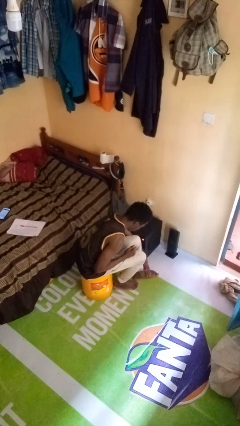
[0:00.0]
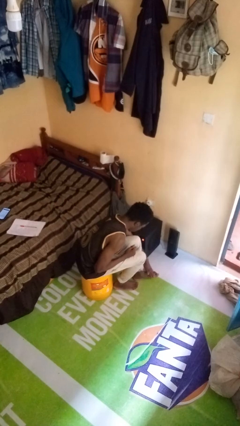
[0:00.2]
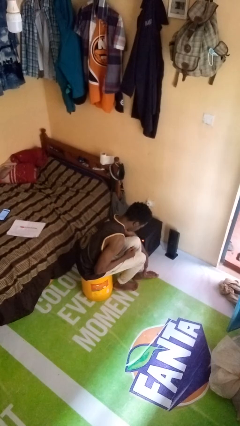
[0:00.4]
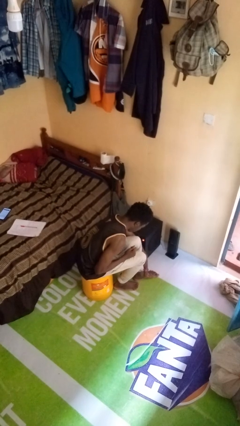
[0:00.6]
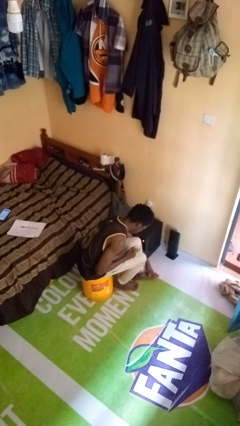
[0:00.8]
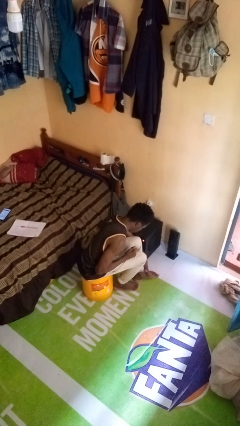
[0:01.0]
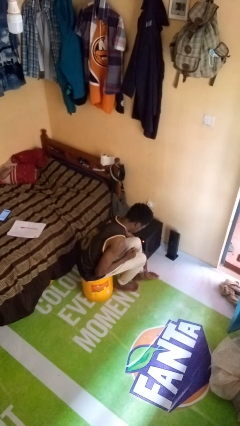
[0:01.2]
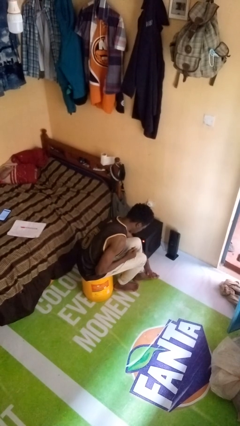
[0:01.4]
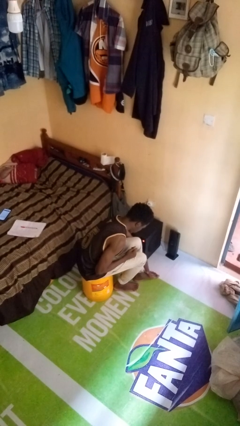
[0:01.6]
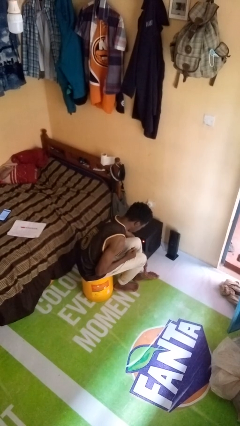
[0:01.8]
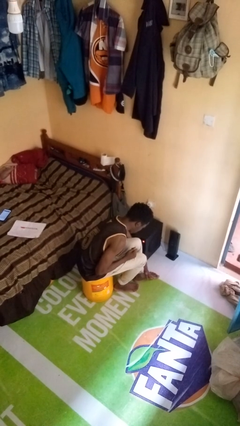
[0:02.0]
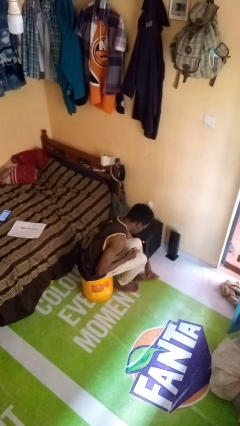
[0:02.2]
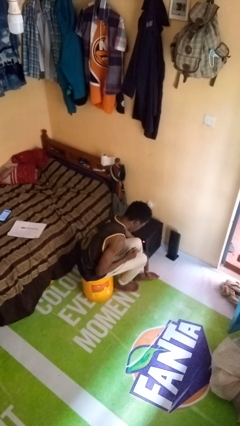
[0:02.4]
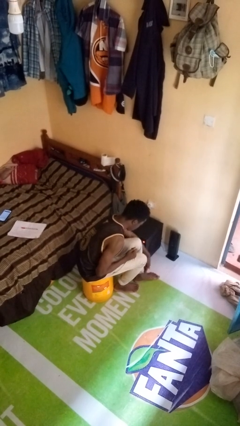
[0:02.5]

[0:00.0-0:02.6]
person rubs foot

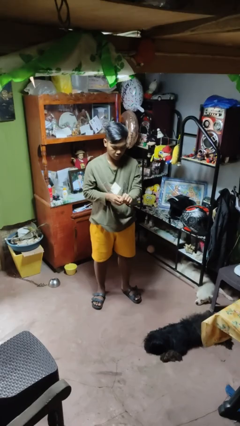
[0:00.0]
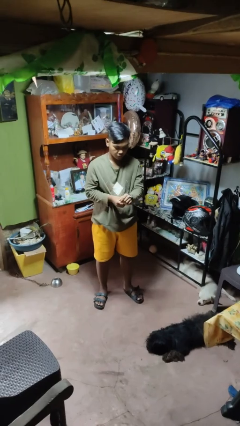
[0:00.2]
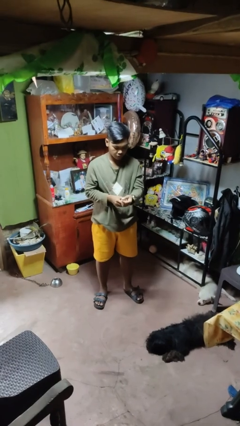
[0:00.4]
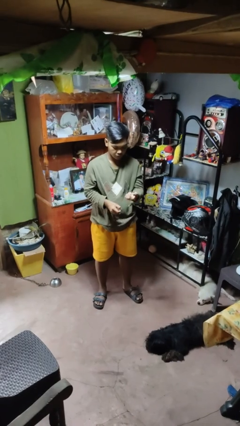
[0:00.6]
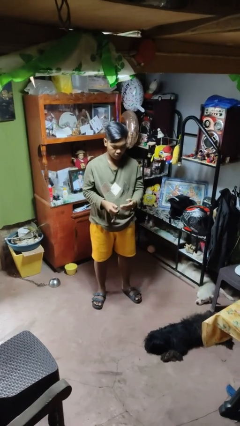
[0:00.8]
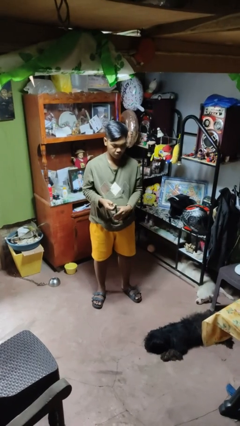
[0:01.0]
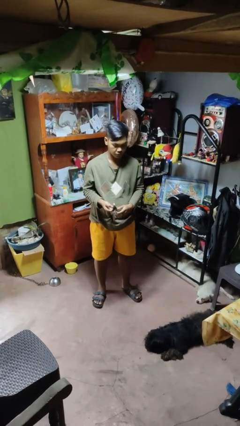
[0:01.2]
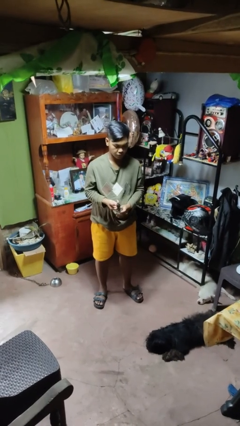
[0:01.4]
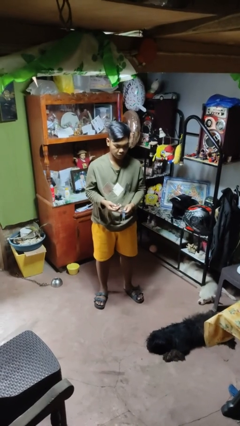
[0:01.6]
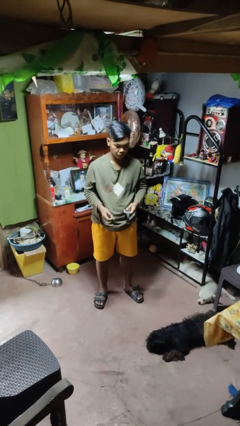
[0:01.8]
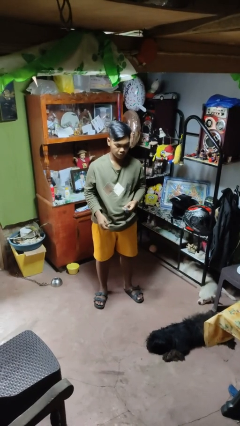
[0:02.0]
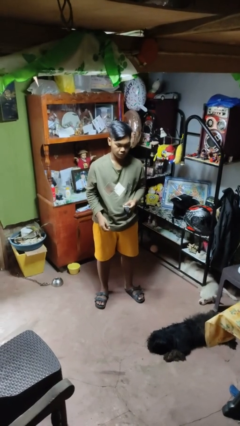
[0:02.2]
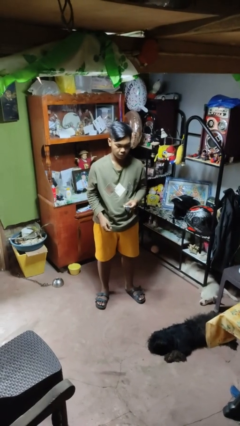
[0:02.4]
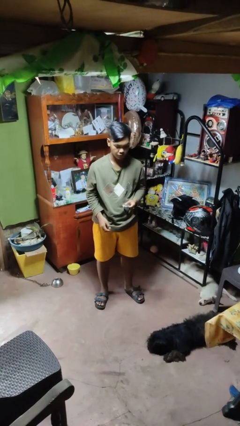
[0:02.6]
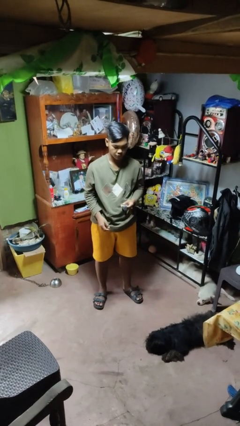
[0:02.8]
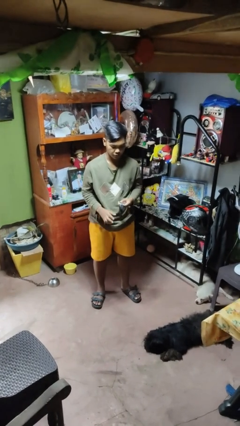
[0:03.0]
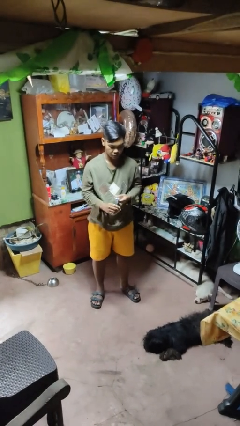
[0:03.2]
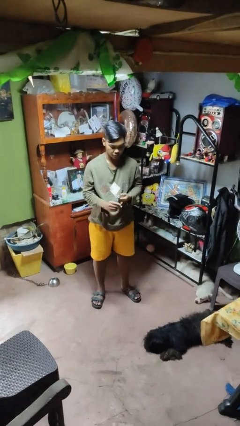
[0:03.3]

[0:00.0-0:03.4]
person takes off wristwatch

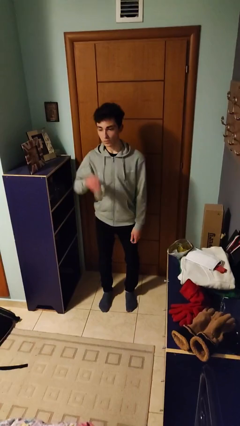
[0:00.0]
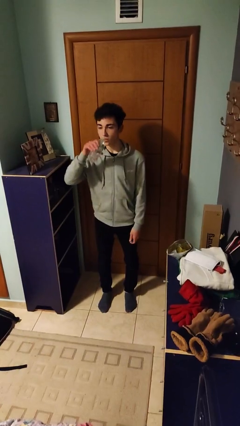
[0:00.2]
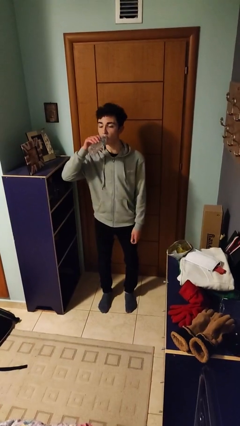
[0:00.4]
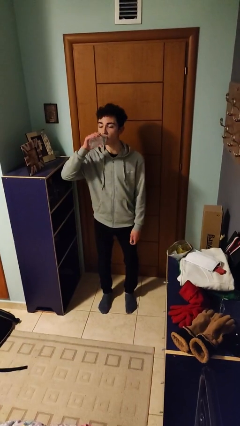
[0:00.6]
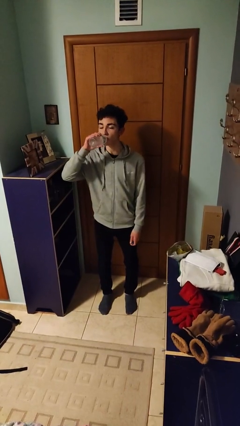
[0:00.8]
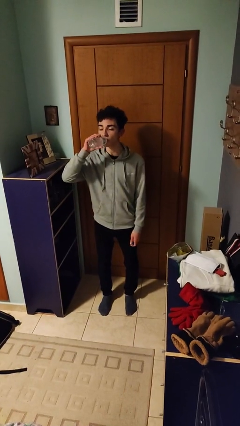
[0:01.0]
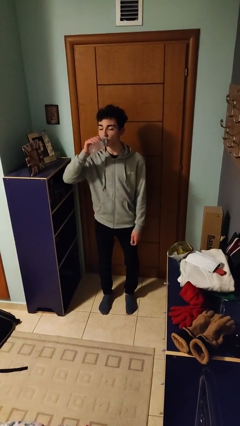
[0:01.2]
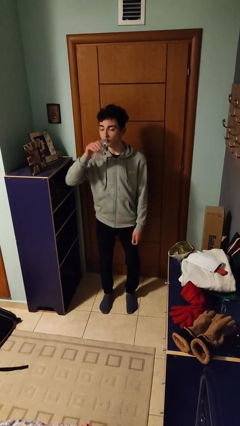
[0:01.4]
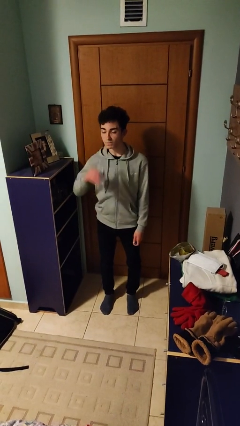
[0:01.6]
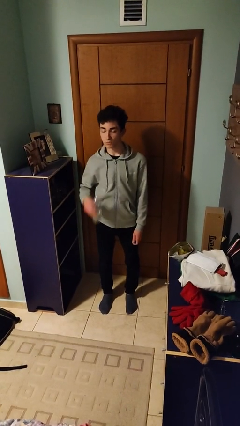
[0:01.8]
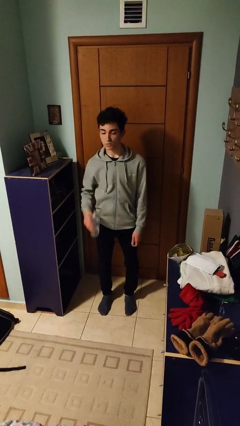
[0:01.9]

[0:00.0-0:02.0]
person drinks from bottle

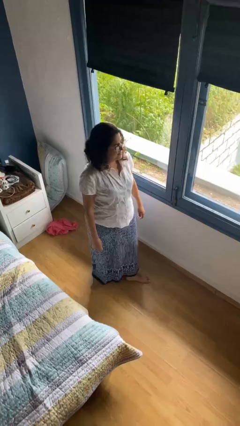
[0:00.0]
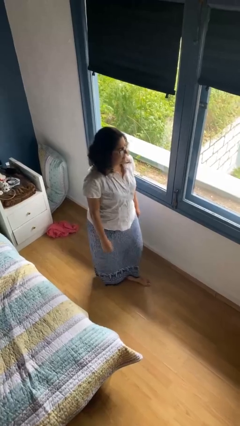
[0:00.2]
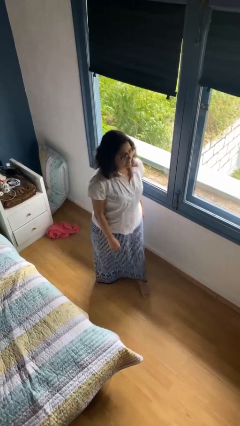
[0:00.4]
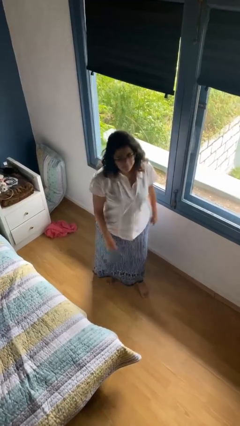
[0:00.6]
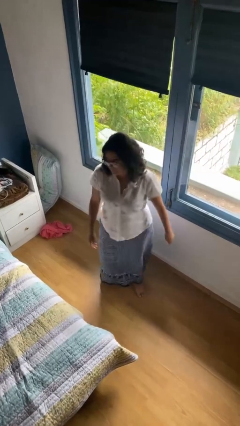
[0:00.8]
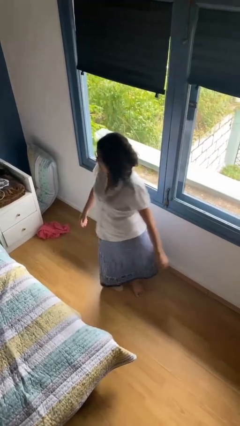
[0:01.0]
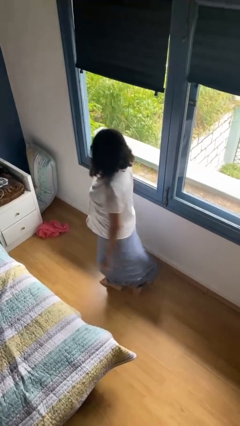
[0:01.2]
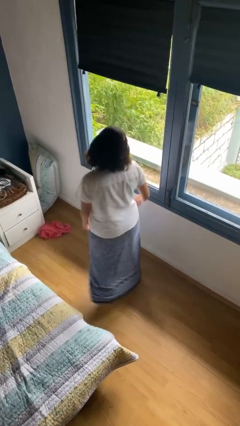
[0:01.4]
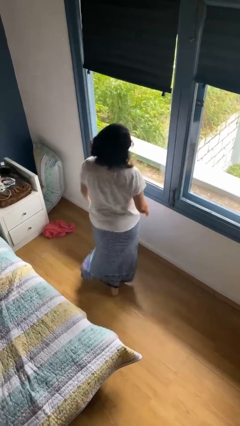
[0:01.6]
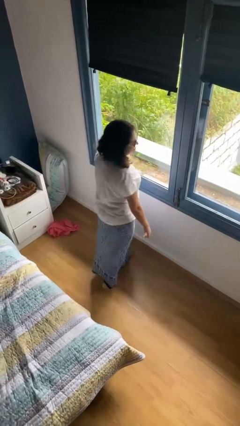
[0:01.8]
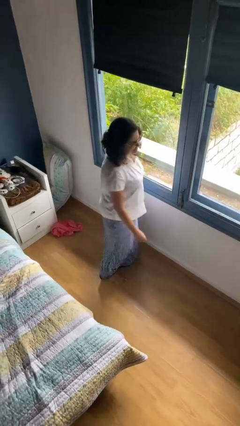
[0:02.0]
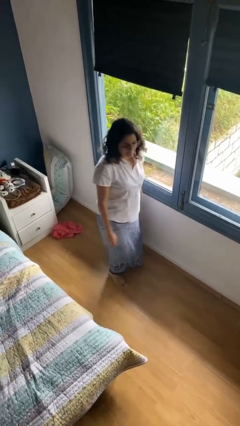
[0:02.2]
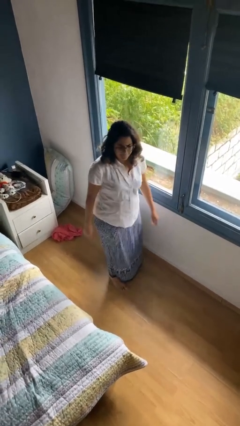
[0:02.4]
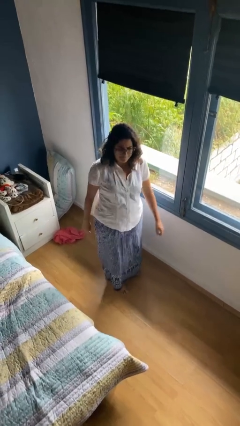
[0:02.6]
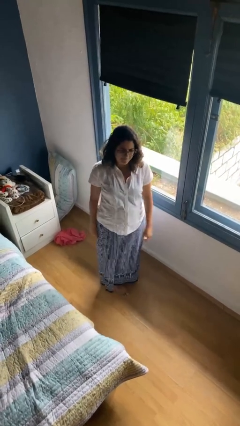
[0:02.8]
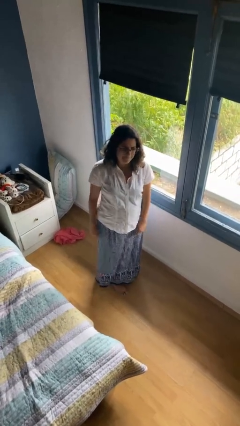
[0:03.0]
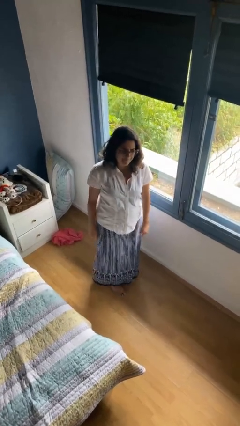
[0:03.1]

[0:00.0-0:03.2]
person twirls

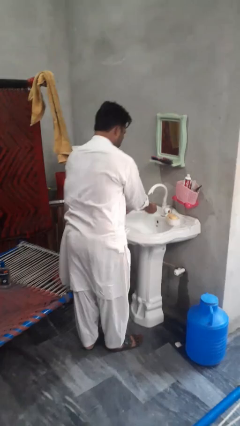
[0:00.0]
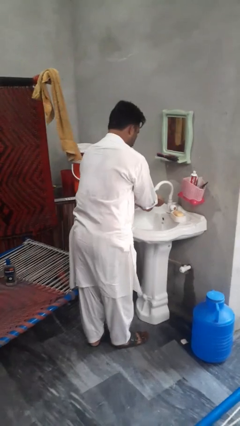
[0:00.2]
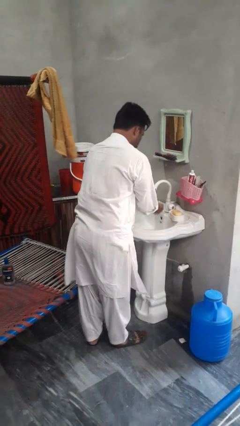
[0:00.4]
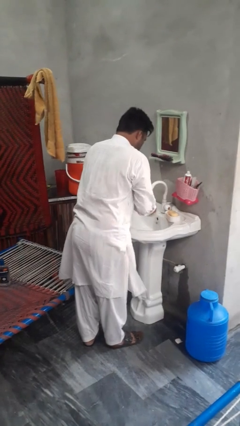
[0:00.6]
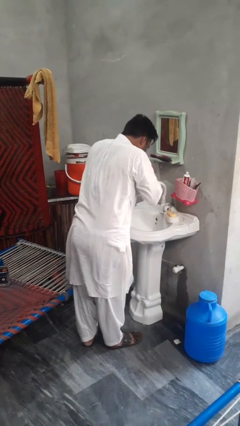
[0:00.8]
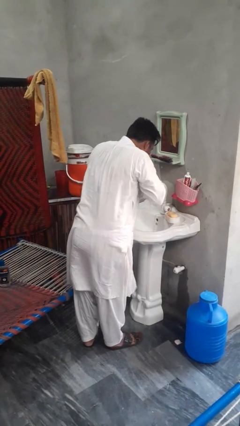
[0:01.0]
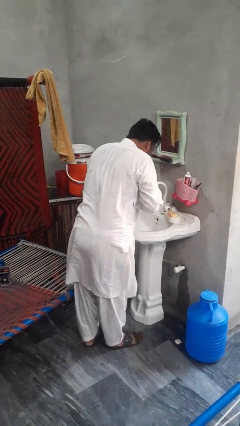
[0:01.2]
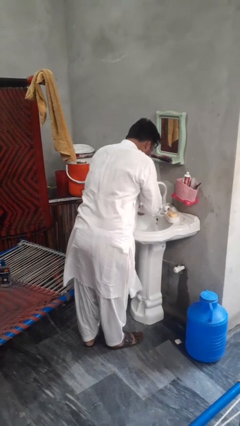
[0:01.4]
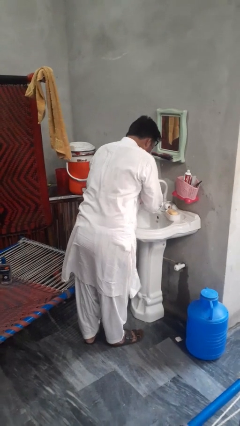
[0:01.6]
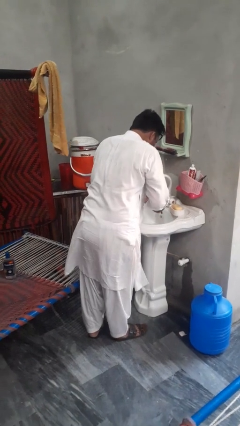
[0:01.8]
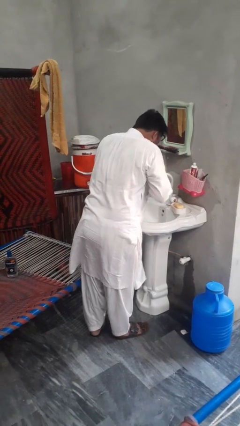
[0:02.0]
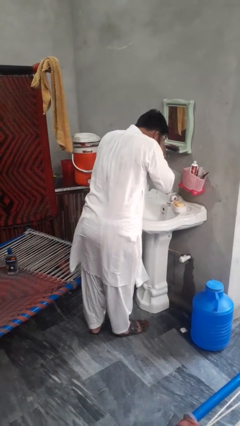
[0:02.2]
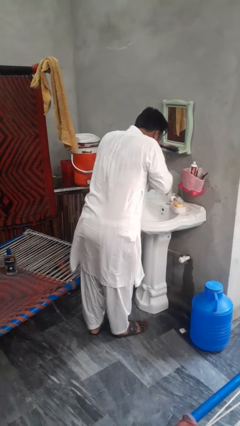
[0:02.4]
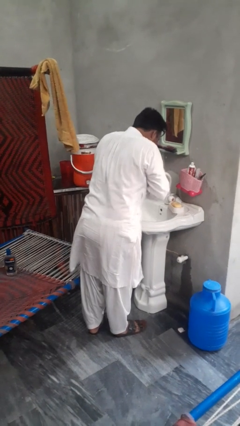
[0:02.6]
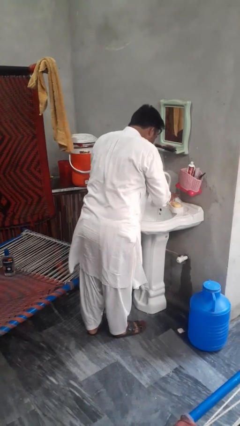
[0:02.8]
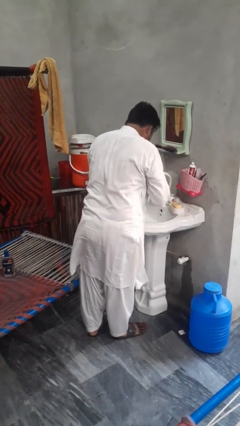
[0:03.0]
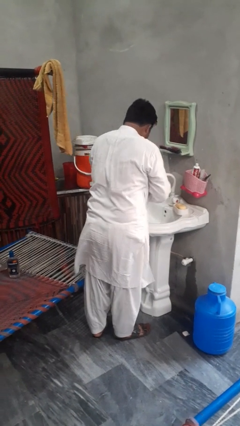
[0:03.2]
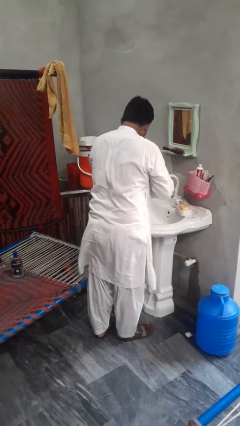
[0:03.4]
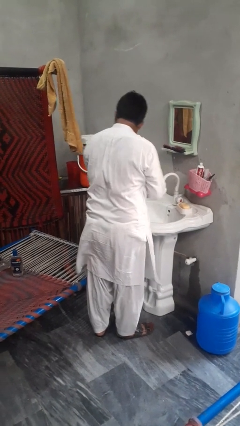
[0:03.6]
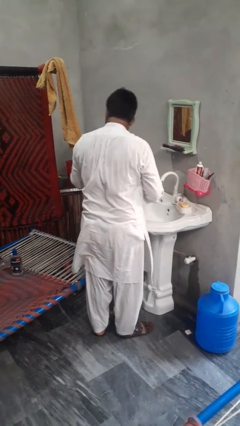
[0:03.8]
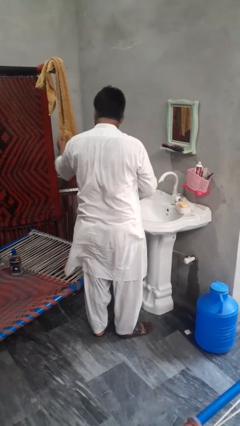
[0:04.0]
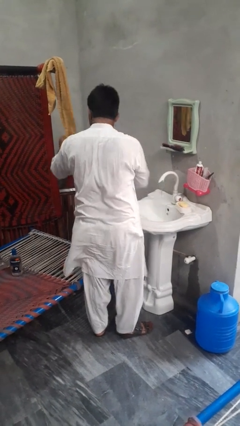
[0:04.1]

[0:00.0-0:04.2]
person washes face

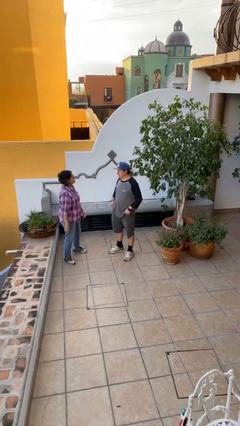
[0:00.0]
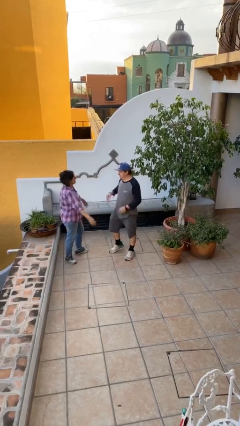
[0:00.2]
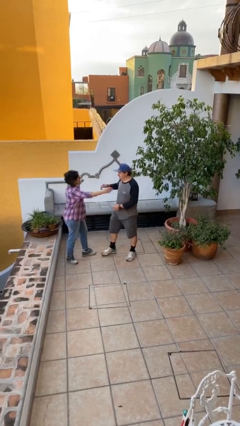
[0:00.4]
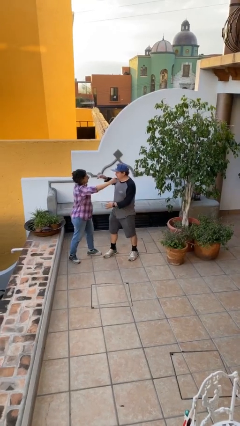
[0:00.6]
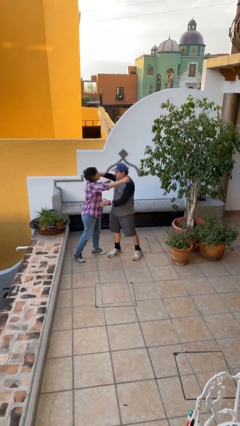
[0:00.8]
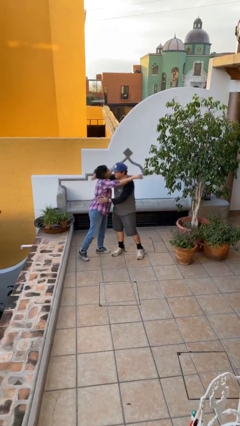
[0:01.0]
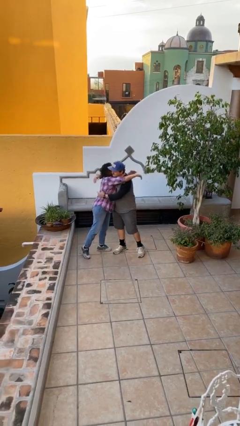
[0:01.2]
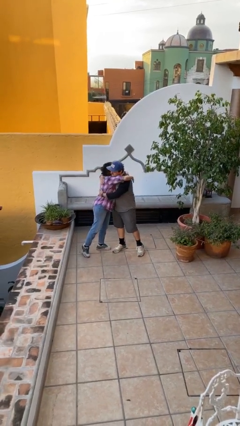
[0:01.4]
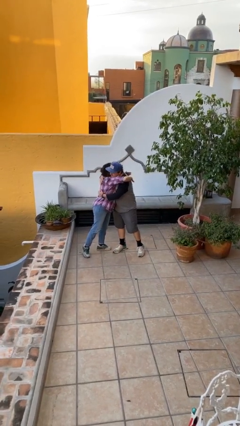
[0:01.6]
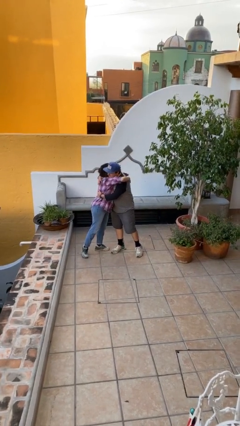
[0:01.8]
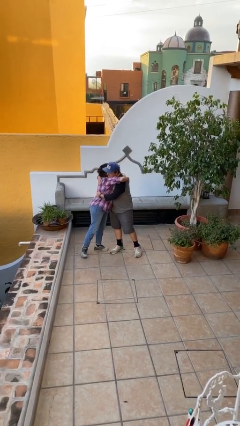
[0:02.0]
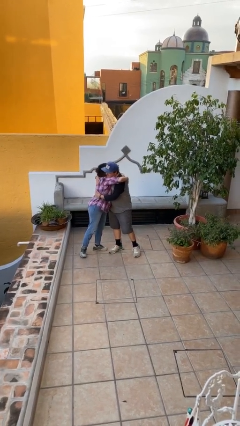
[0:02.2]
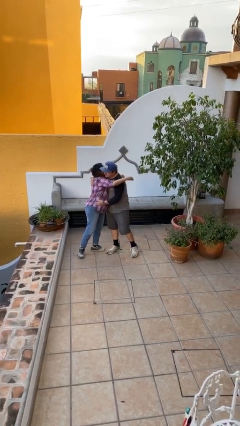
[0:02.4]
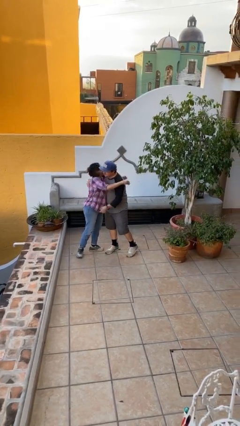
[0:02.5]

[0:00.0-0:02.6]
person embraces person
